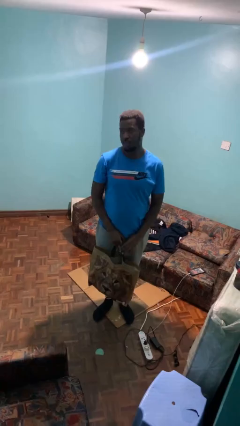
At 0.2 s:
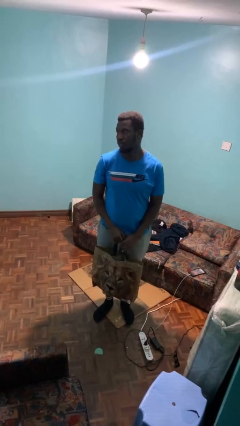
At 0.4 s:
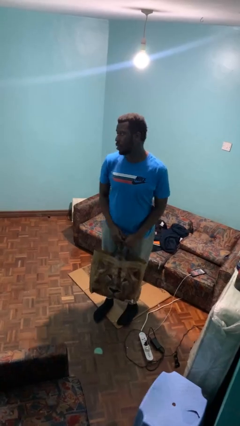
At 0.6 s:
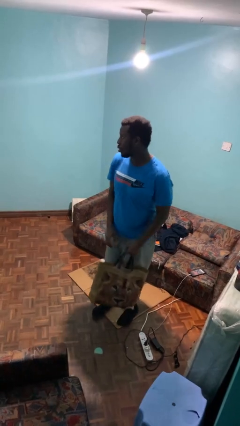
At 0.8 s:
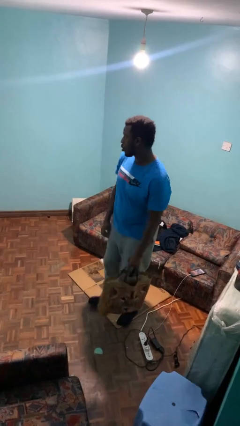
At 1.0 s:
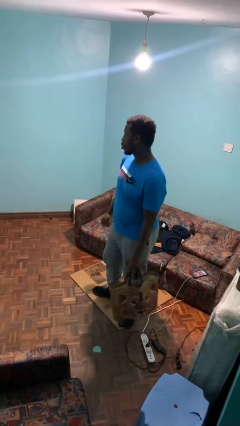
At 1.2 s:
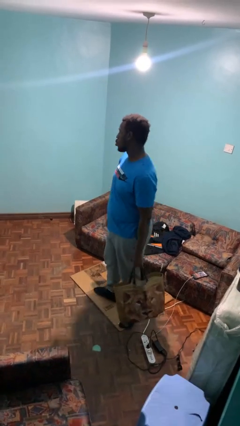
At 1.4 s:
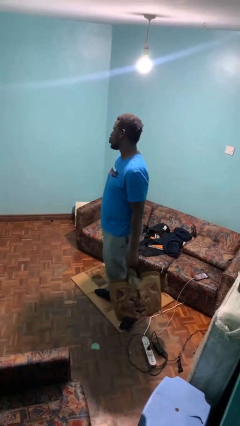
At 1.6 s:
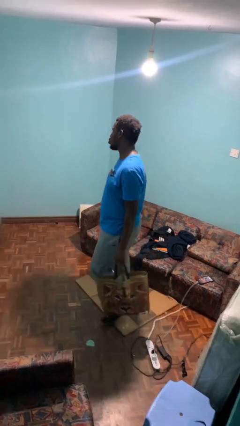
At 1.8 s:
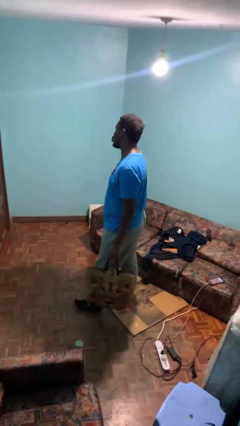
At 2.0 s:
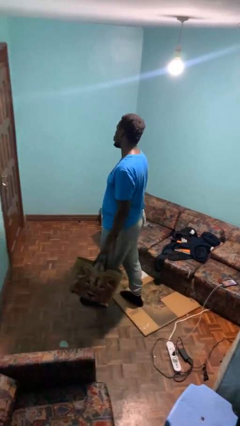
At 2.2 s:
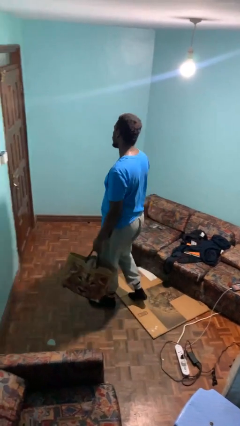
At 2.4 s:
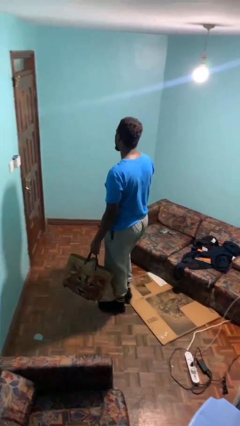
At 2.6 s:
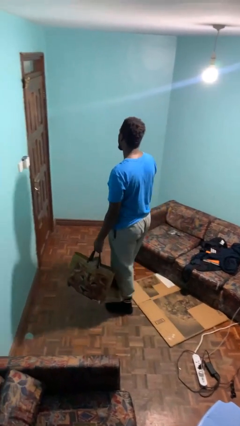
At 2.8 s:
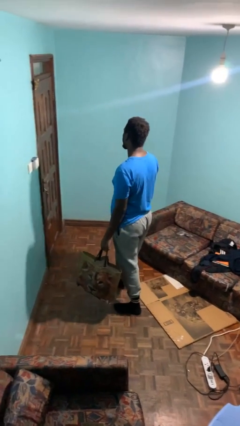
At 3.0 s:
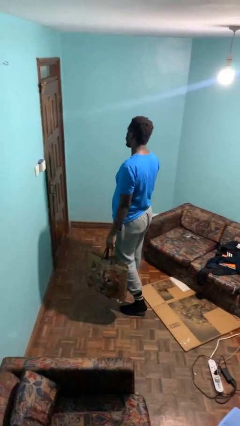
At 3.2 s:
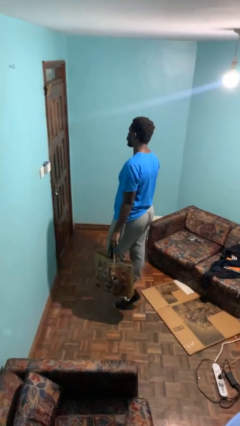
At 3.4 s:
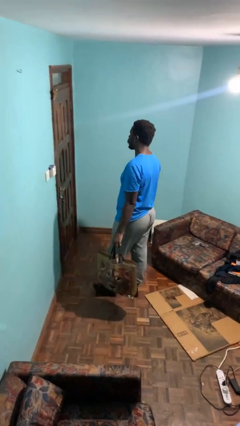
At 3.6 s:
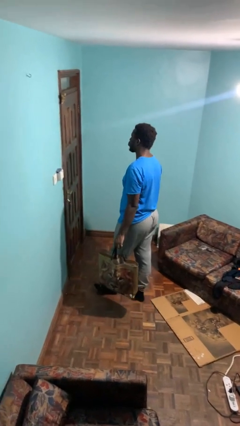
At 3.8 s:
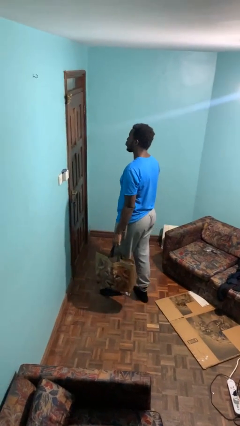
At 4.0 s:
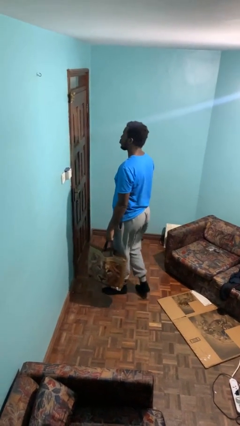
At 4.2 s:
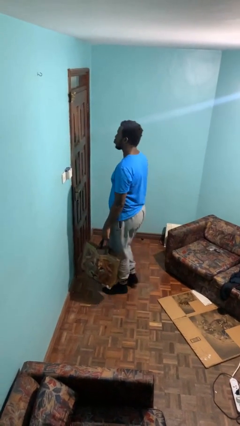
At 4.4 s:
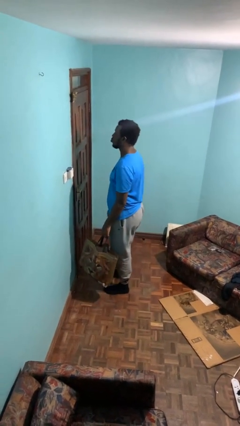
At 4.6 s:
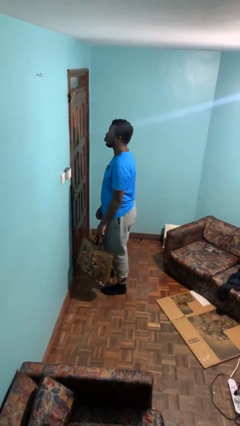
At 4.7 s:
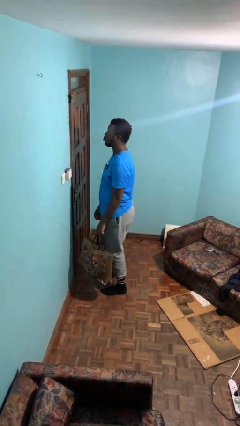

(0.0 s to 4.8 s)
person carries groceries

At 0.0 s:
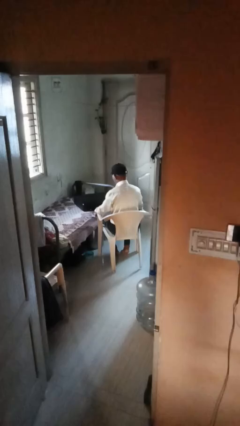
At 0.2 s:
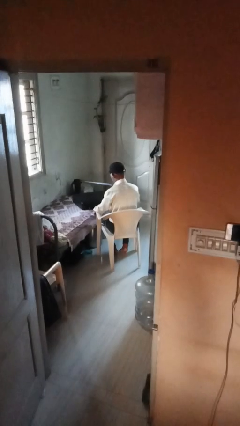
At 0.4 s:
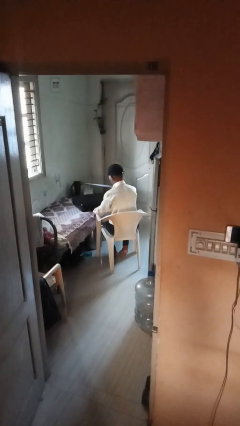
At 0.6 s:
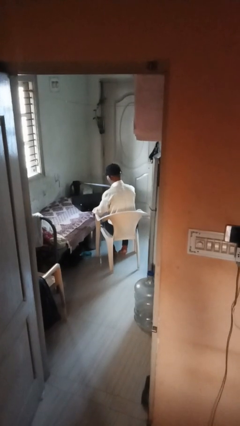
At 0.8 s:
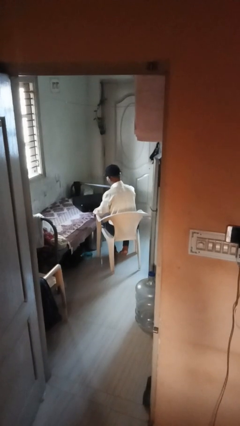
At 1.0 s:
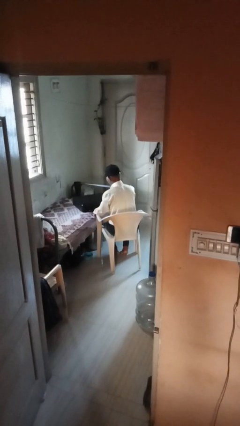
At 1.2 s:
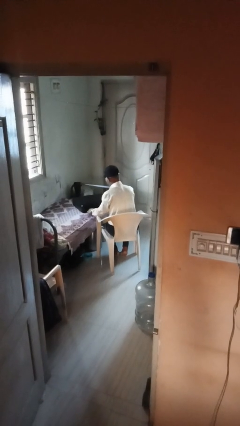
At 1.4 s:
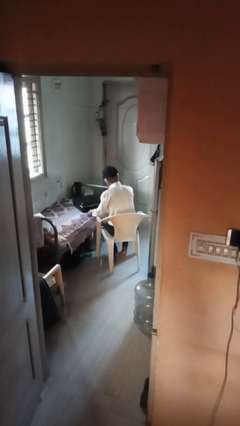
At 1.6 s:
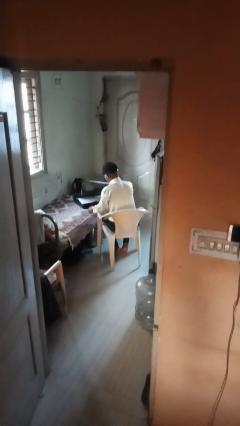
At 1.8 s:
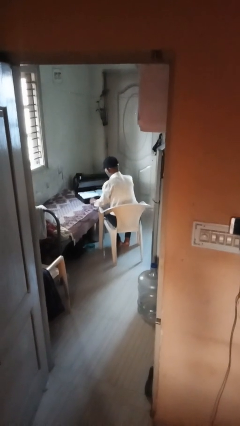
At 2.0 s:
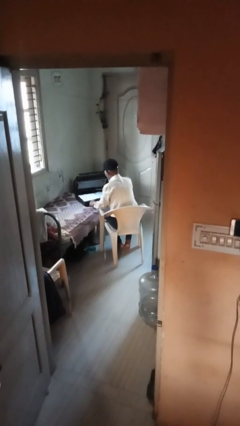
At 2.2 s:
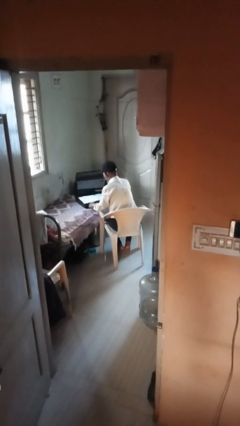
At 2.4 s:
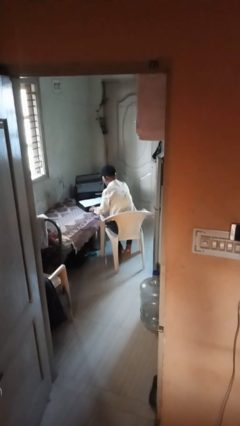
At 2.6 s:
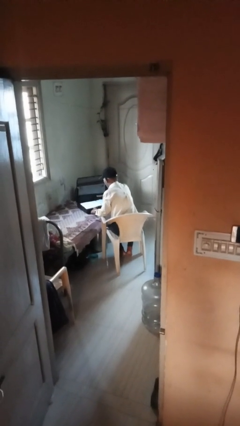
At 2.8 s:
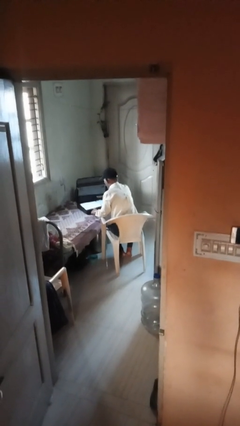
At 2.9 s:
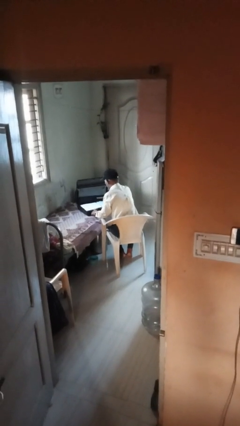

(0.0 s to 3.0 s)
person opens suitcase

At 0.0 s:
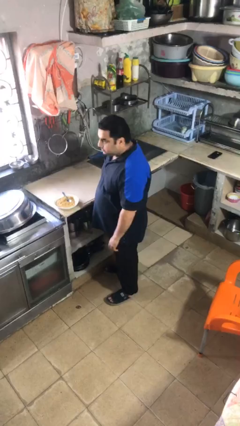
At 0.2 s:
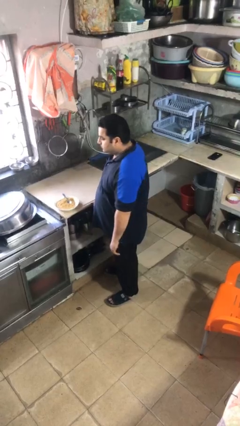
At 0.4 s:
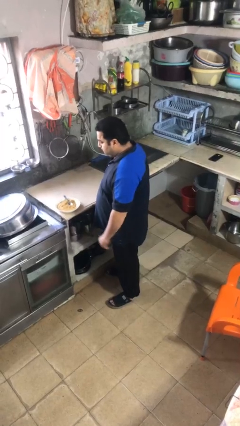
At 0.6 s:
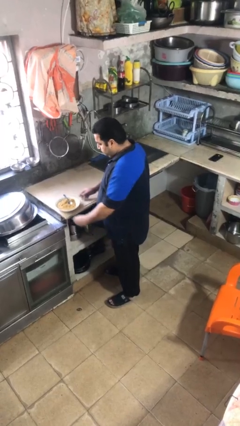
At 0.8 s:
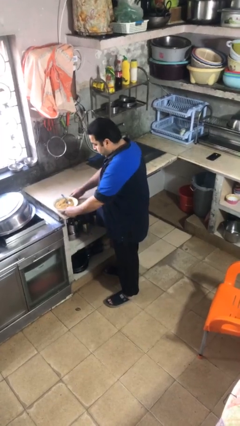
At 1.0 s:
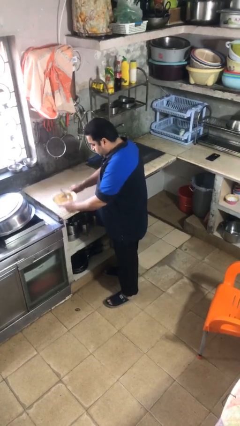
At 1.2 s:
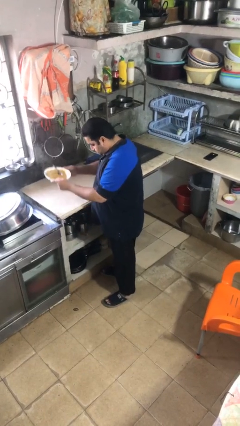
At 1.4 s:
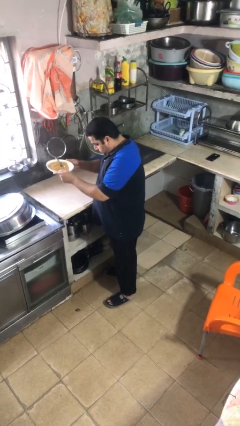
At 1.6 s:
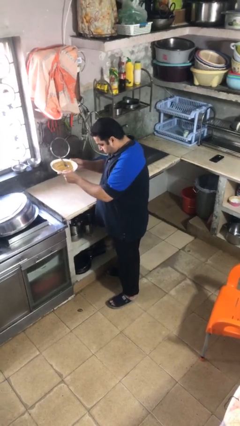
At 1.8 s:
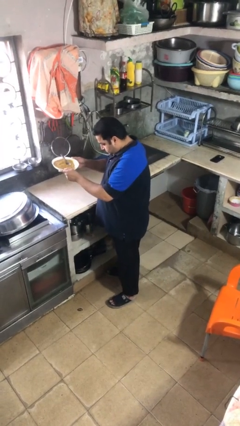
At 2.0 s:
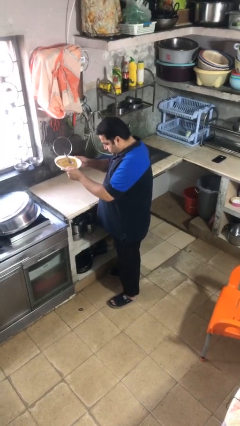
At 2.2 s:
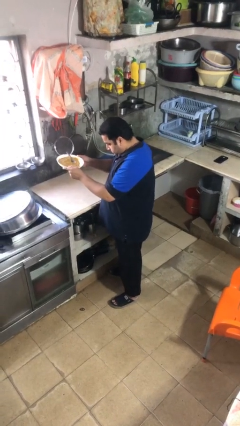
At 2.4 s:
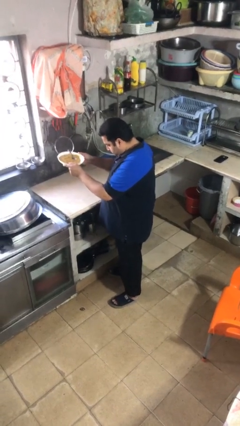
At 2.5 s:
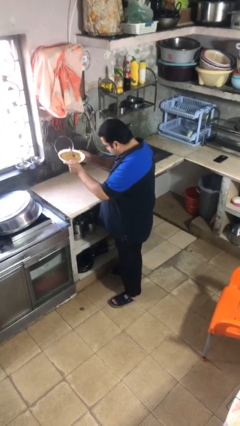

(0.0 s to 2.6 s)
person picks up object from countertop

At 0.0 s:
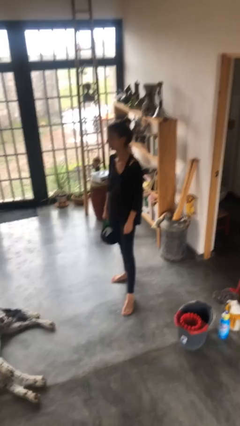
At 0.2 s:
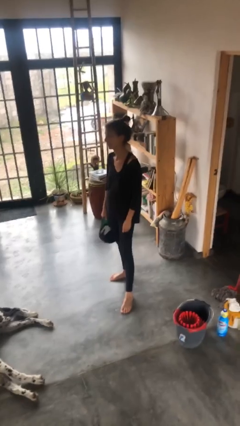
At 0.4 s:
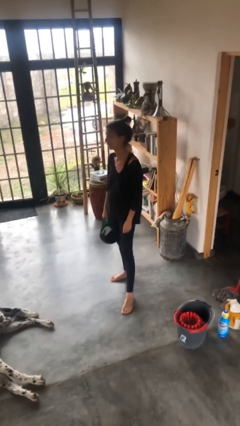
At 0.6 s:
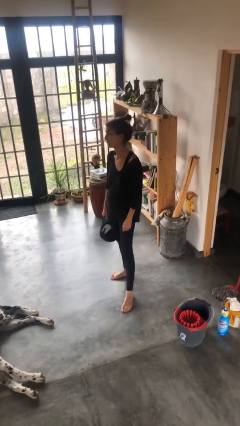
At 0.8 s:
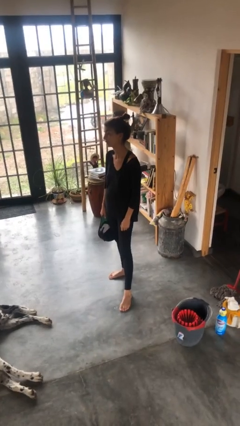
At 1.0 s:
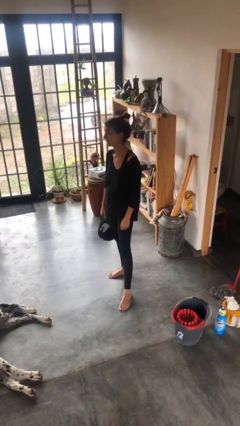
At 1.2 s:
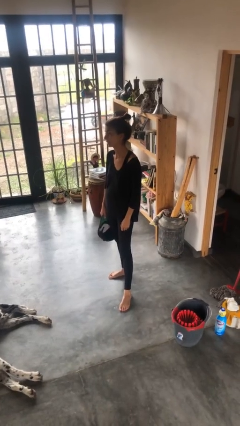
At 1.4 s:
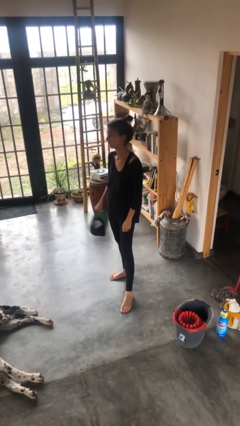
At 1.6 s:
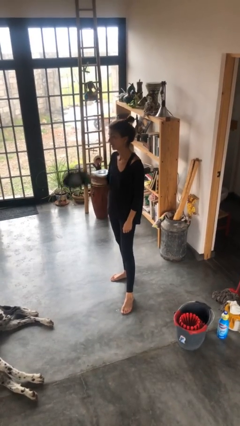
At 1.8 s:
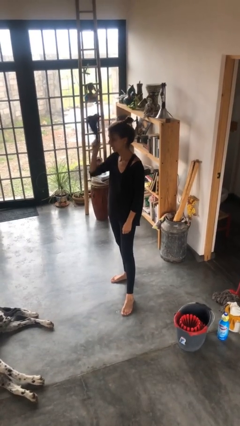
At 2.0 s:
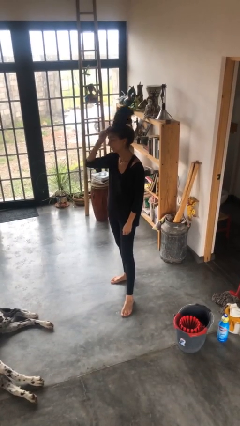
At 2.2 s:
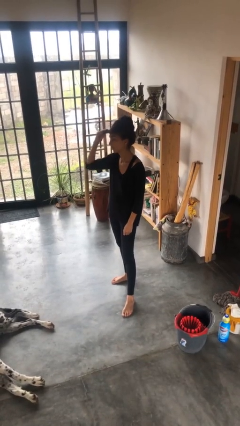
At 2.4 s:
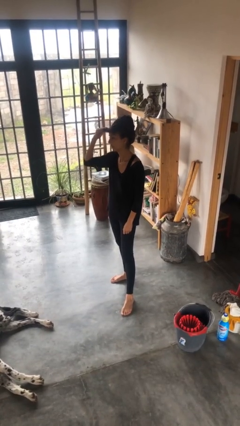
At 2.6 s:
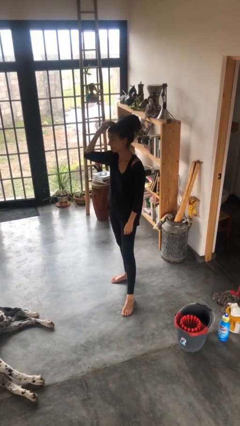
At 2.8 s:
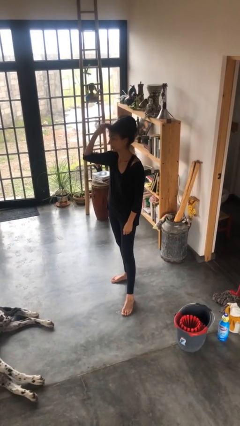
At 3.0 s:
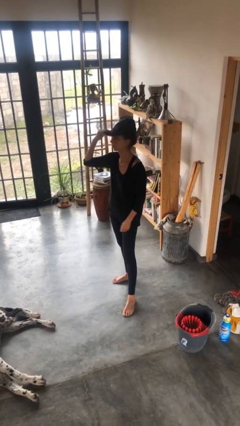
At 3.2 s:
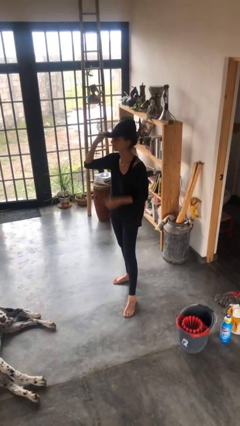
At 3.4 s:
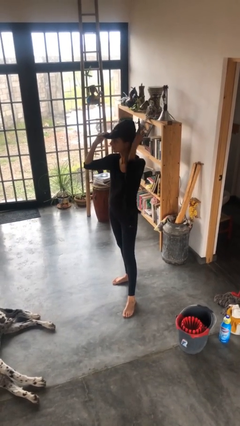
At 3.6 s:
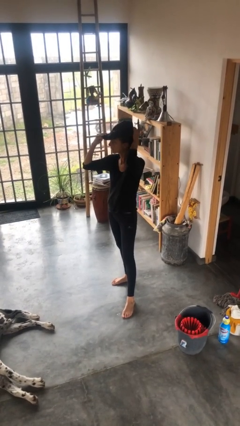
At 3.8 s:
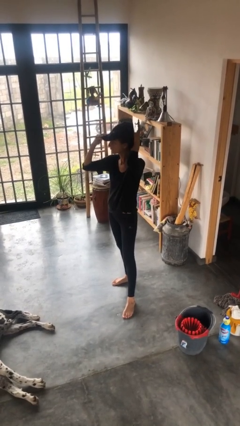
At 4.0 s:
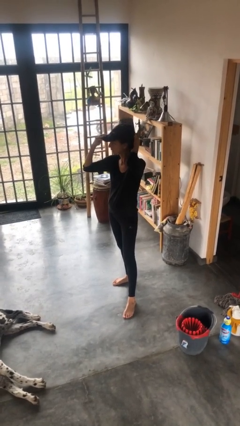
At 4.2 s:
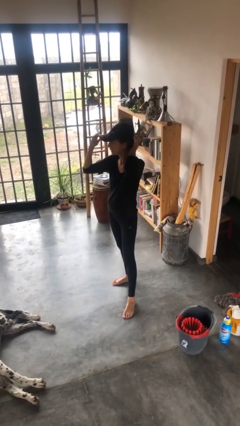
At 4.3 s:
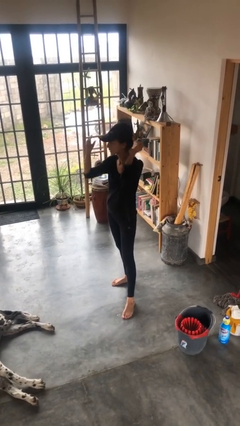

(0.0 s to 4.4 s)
person puts on hat

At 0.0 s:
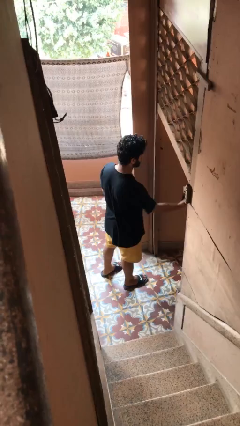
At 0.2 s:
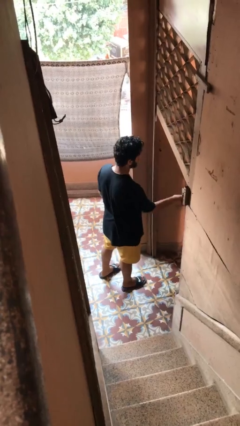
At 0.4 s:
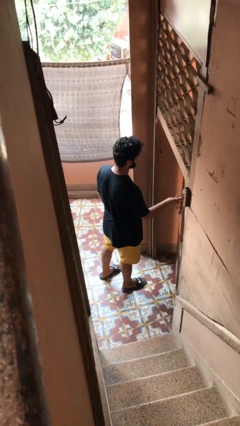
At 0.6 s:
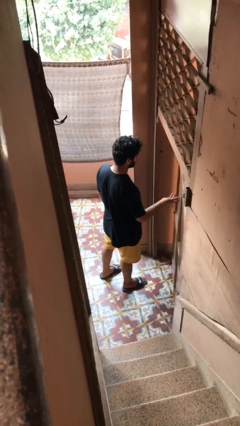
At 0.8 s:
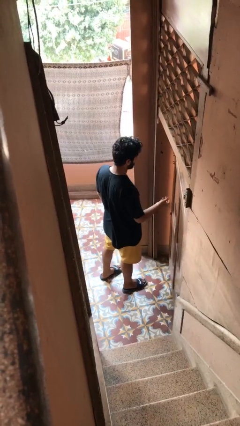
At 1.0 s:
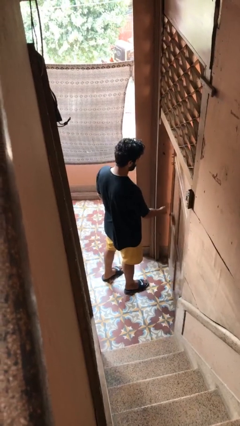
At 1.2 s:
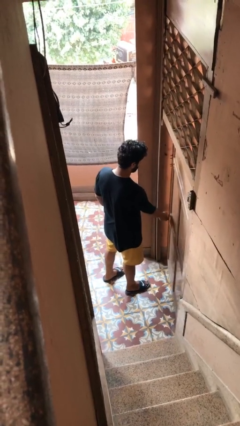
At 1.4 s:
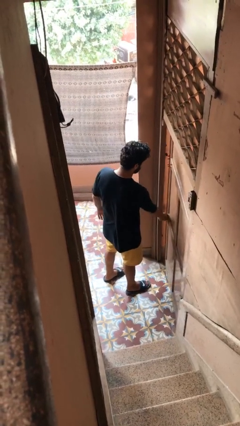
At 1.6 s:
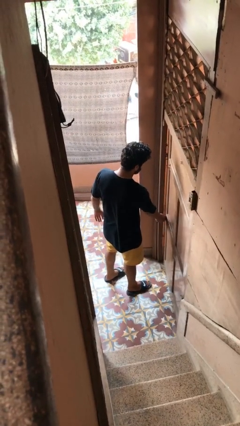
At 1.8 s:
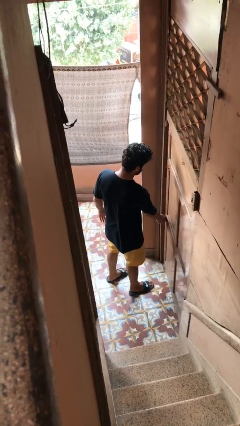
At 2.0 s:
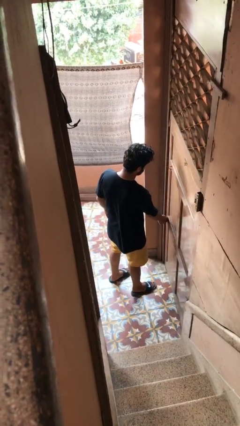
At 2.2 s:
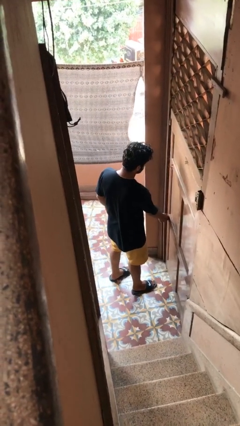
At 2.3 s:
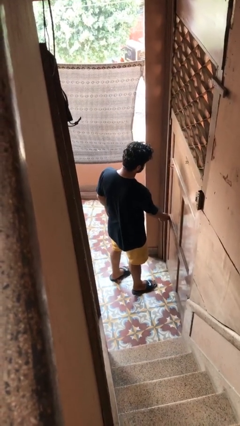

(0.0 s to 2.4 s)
person closes gate

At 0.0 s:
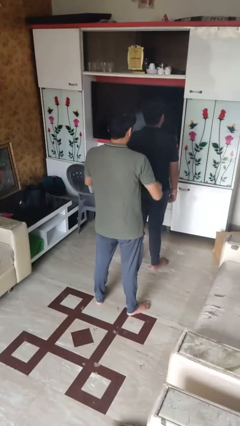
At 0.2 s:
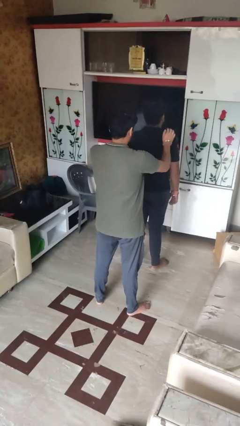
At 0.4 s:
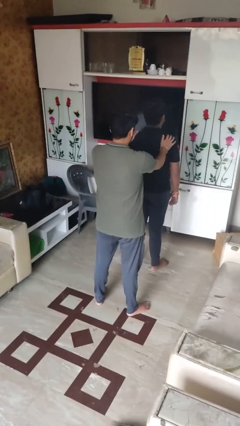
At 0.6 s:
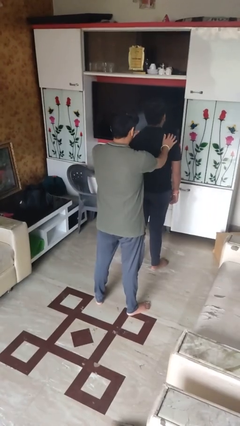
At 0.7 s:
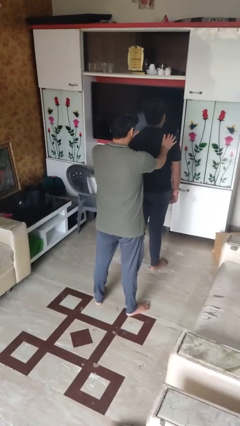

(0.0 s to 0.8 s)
person grabs person by shoulder
